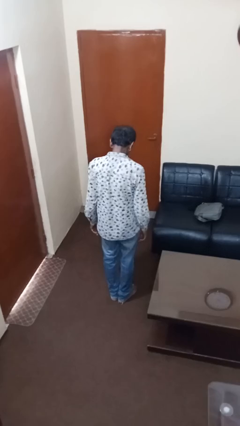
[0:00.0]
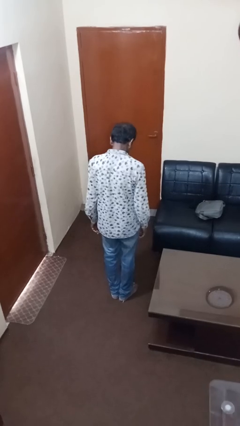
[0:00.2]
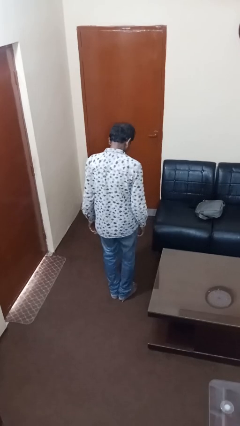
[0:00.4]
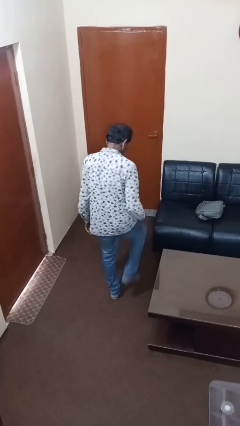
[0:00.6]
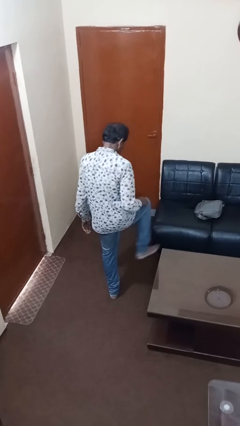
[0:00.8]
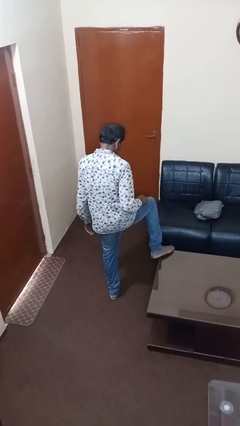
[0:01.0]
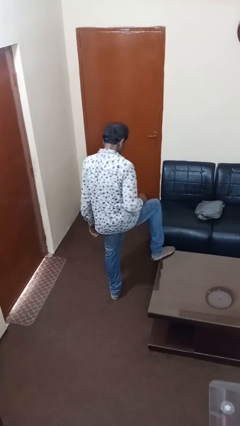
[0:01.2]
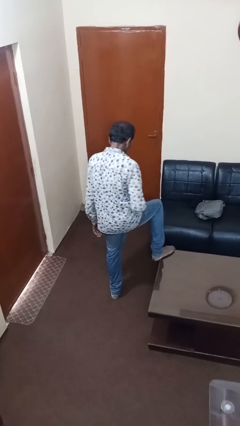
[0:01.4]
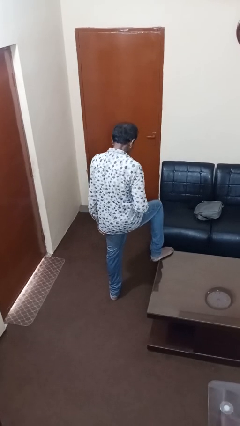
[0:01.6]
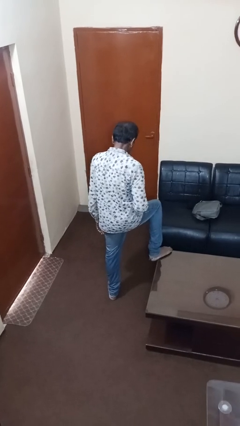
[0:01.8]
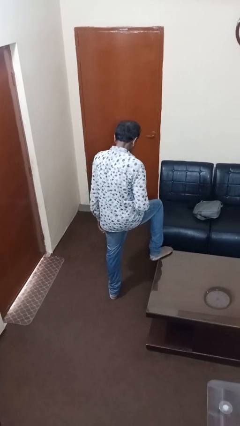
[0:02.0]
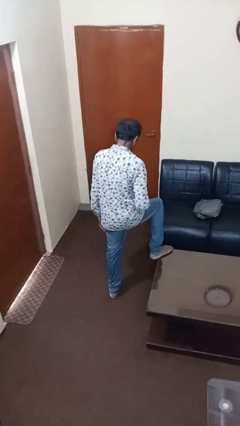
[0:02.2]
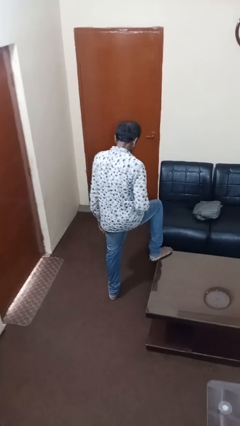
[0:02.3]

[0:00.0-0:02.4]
person puts feet up

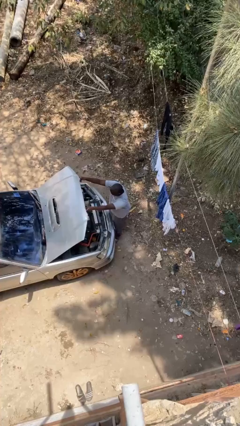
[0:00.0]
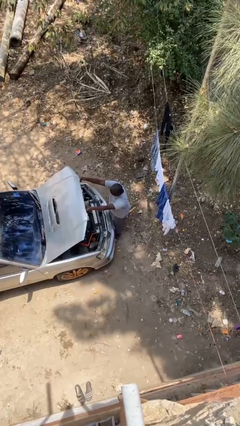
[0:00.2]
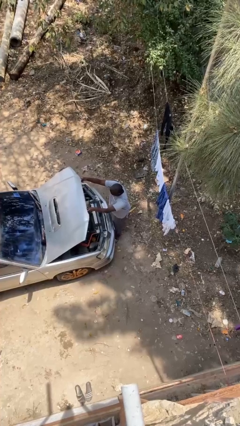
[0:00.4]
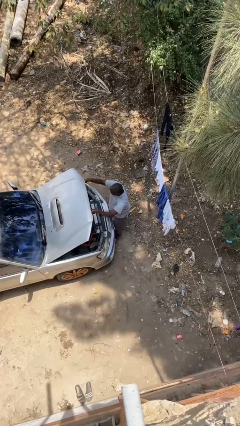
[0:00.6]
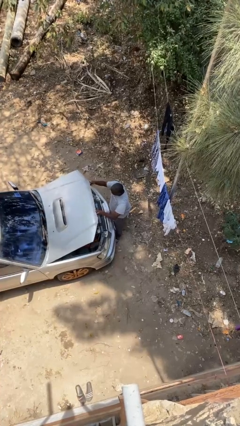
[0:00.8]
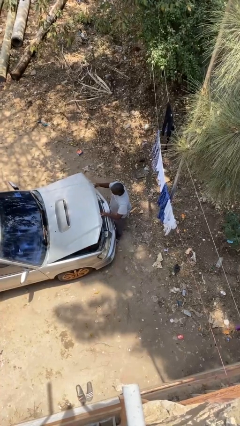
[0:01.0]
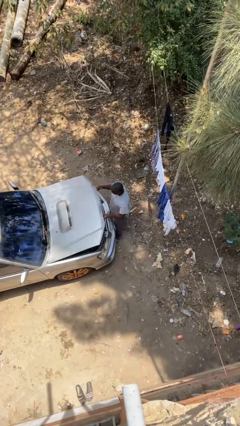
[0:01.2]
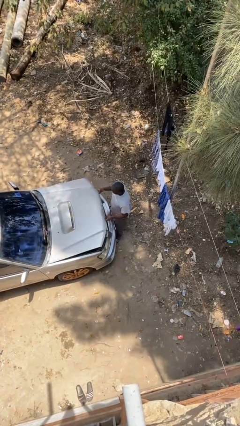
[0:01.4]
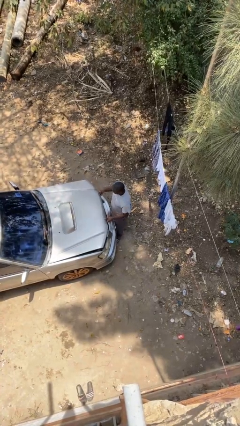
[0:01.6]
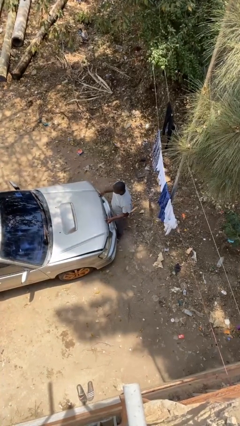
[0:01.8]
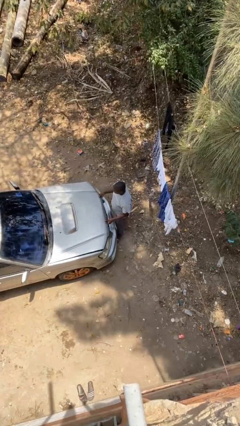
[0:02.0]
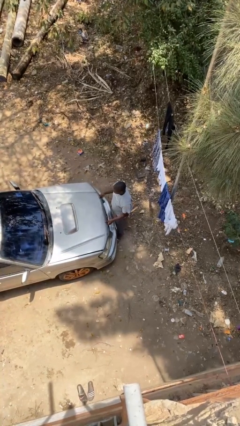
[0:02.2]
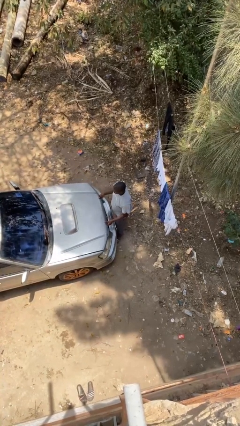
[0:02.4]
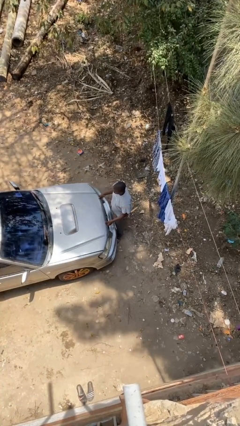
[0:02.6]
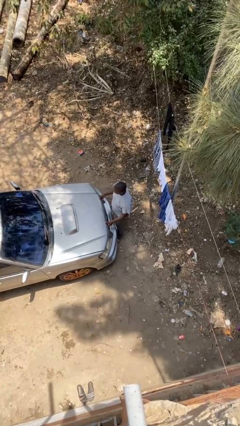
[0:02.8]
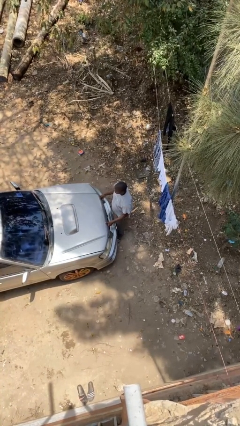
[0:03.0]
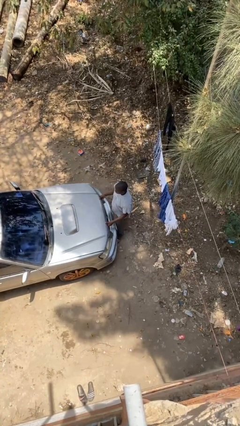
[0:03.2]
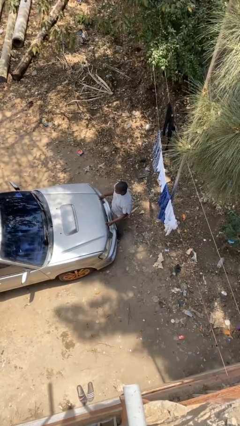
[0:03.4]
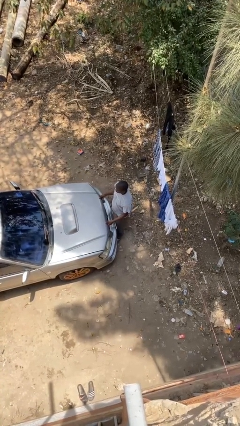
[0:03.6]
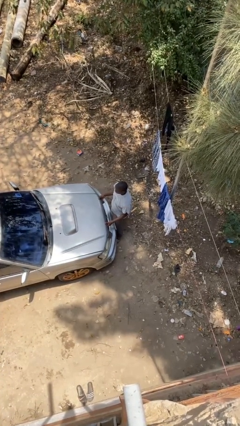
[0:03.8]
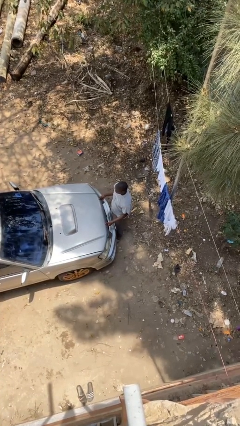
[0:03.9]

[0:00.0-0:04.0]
person closes car hood

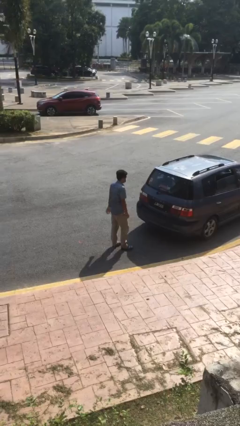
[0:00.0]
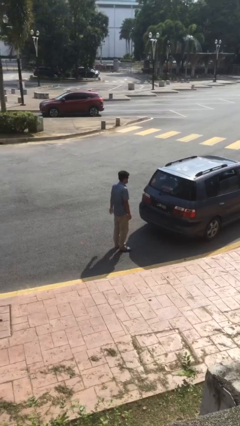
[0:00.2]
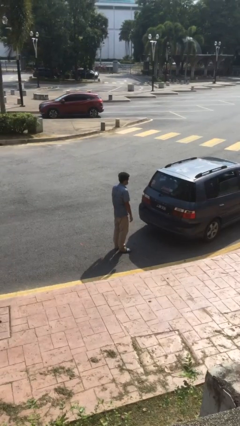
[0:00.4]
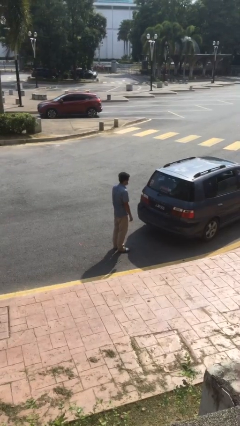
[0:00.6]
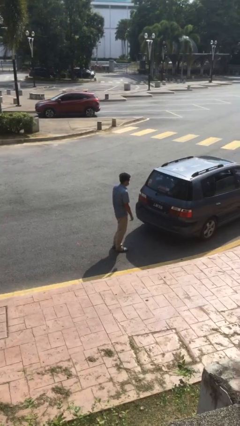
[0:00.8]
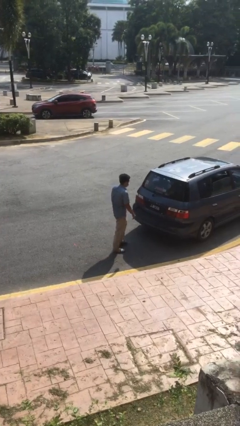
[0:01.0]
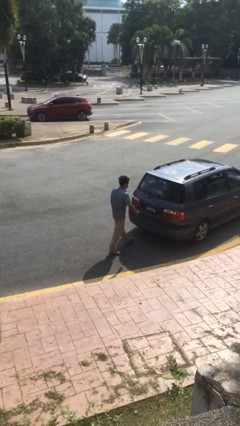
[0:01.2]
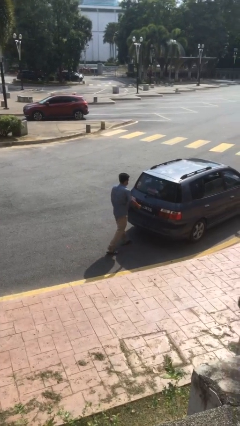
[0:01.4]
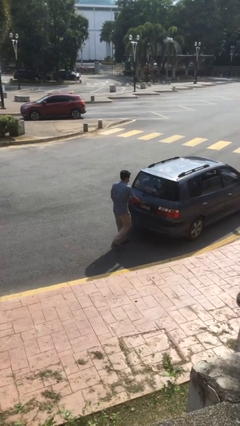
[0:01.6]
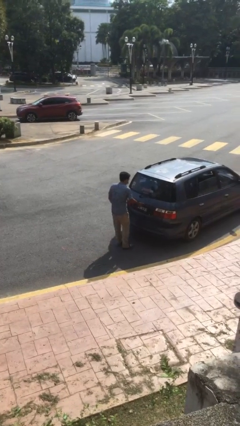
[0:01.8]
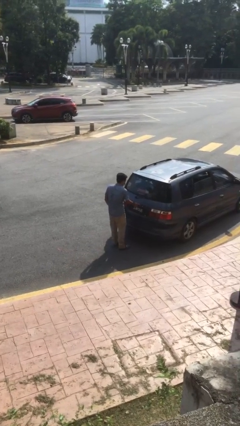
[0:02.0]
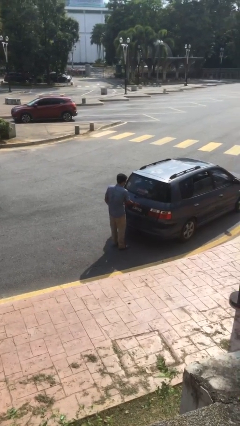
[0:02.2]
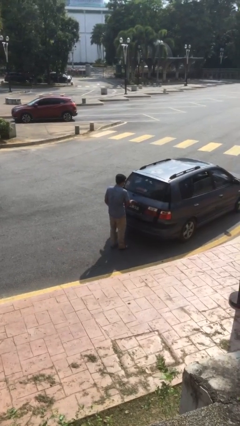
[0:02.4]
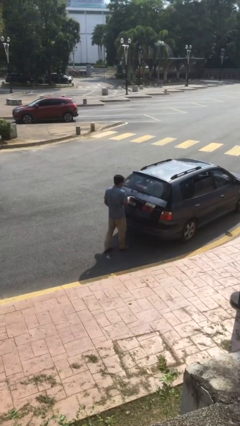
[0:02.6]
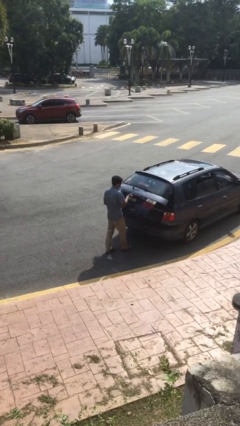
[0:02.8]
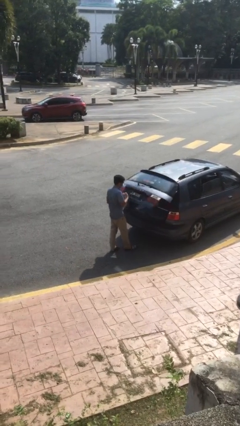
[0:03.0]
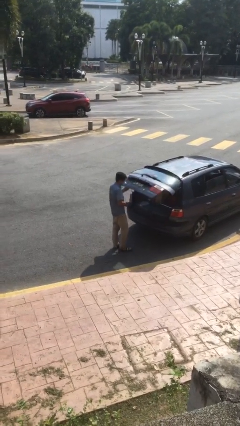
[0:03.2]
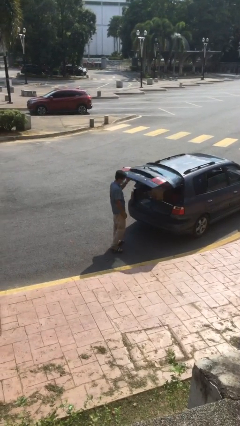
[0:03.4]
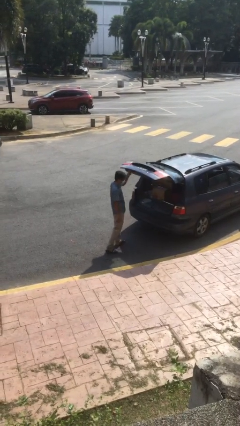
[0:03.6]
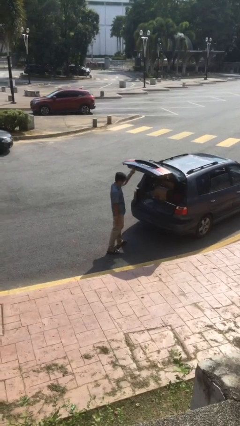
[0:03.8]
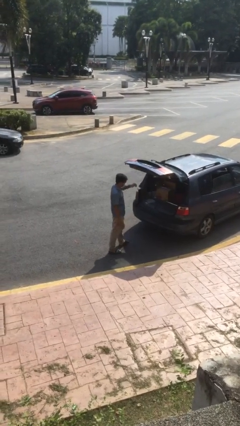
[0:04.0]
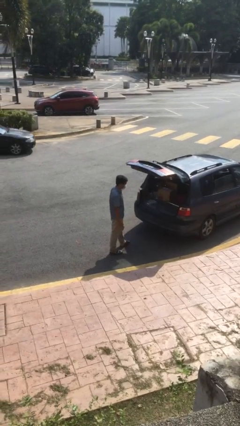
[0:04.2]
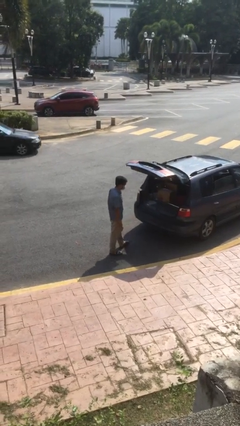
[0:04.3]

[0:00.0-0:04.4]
person opens car trunk

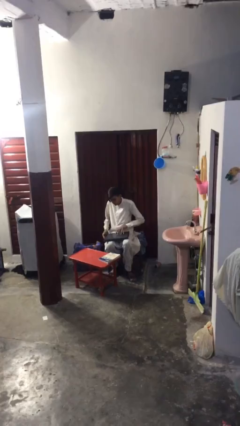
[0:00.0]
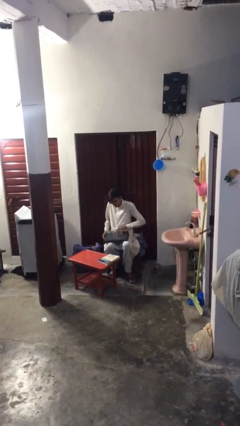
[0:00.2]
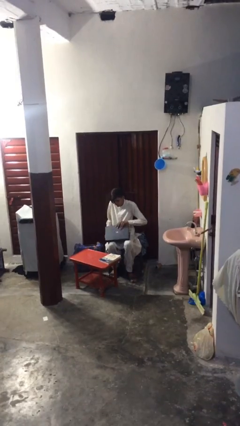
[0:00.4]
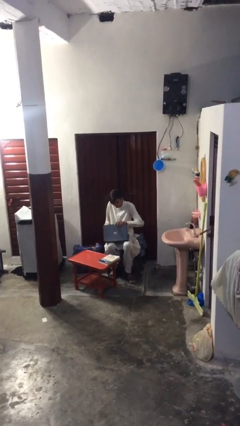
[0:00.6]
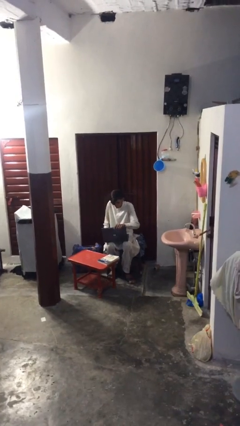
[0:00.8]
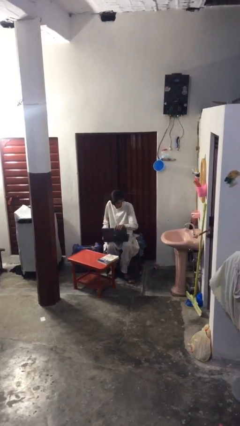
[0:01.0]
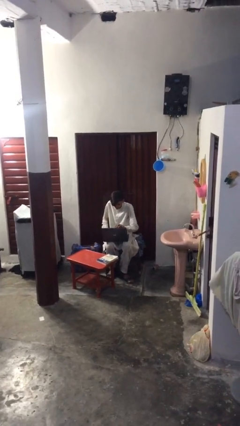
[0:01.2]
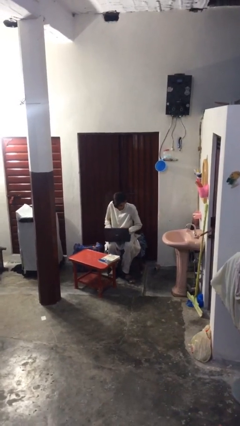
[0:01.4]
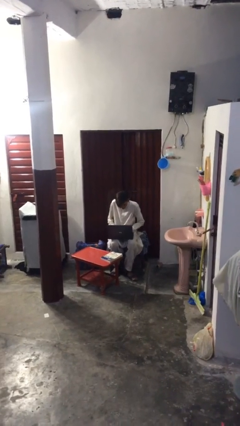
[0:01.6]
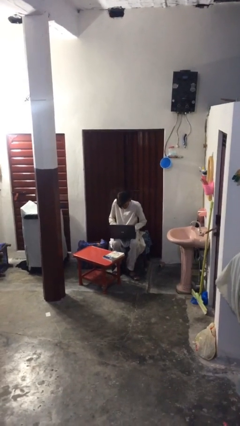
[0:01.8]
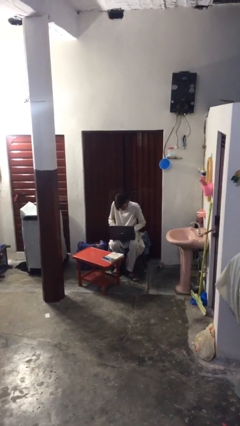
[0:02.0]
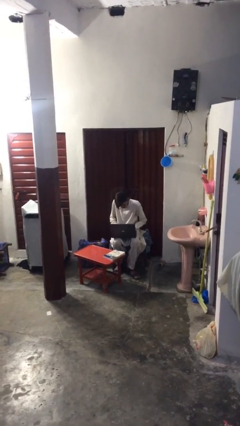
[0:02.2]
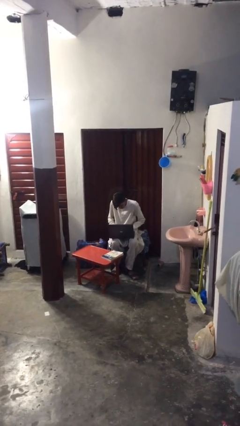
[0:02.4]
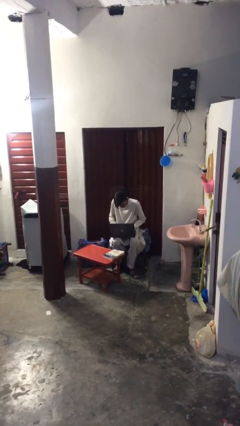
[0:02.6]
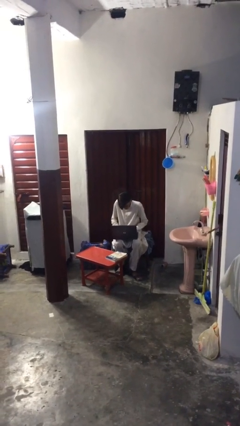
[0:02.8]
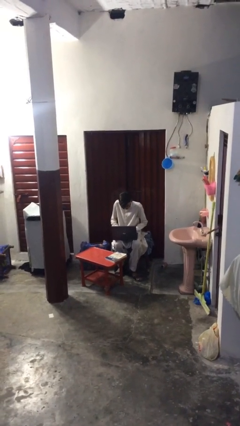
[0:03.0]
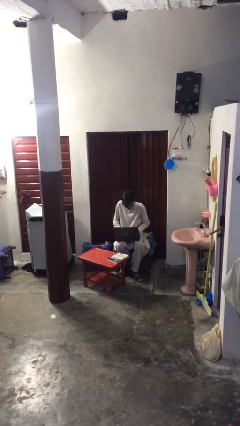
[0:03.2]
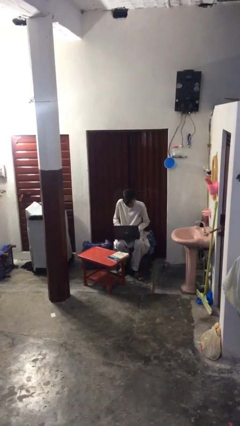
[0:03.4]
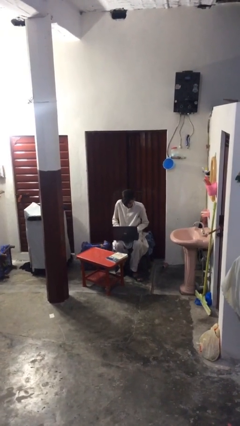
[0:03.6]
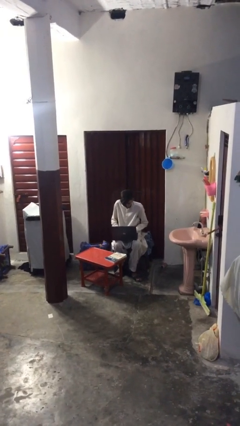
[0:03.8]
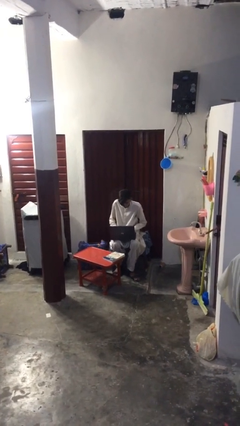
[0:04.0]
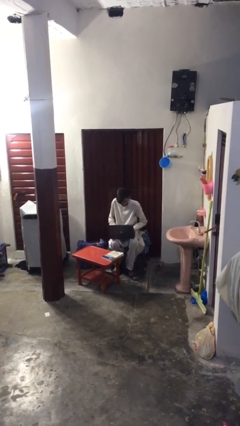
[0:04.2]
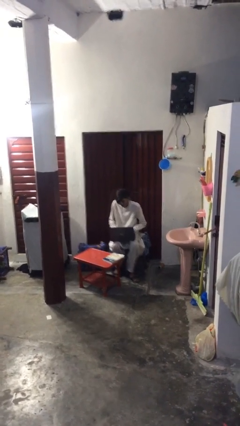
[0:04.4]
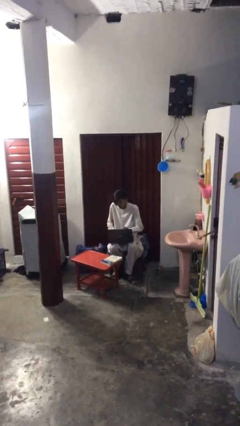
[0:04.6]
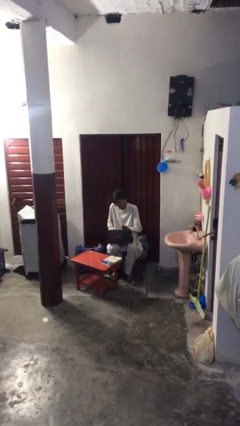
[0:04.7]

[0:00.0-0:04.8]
person interacts with laptop

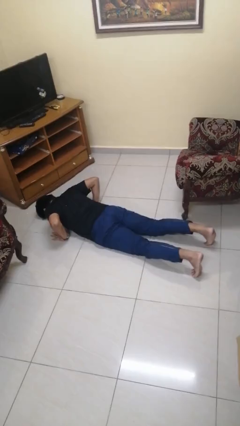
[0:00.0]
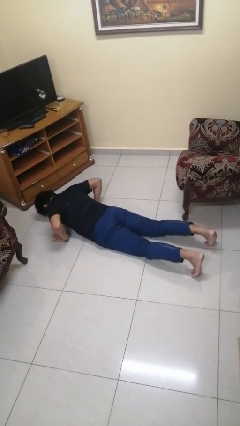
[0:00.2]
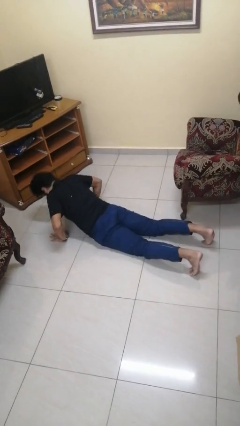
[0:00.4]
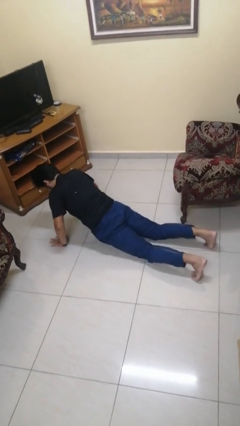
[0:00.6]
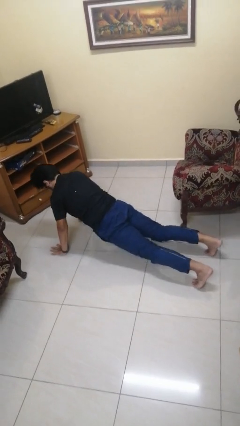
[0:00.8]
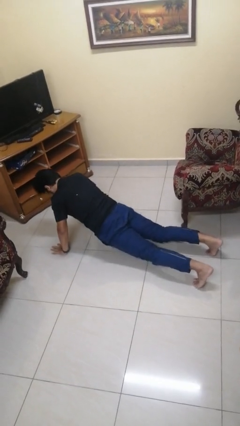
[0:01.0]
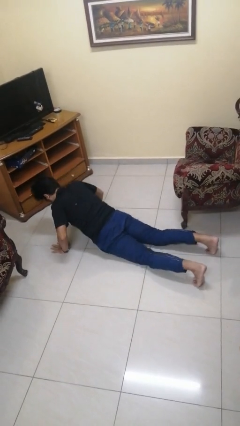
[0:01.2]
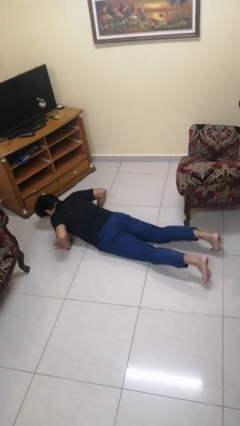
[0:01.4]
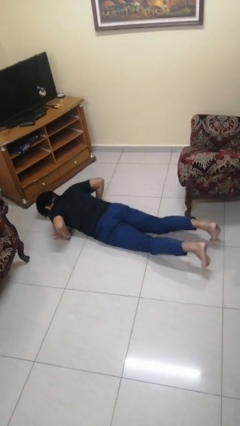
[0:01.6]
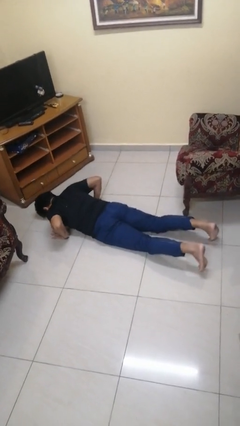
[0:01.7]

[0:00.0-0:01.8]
person exercises with pushup

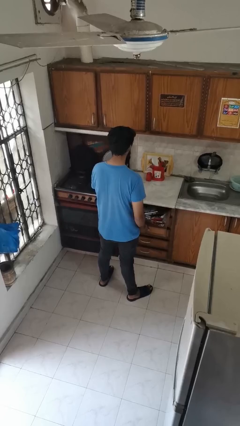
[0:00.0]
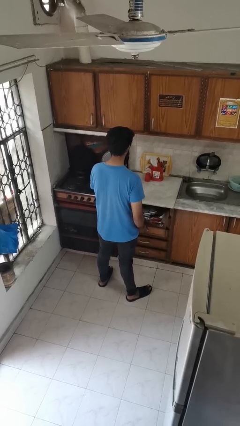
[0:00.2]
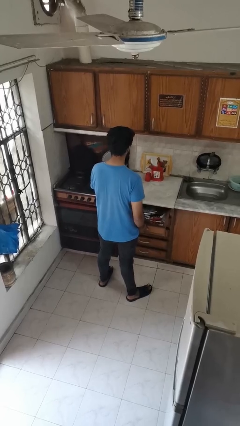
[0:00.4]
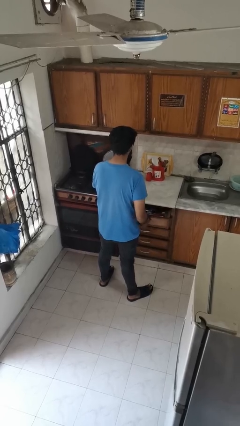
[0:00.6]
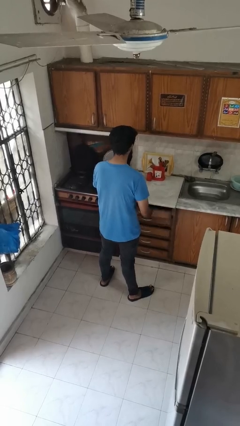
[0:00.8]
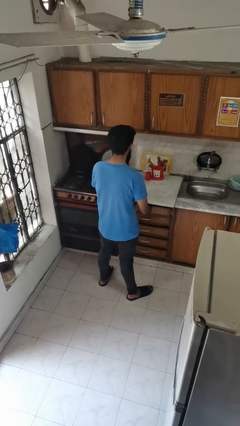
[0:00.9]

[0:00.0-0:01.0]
person closes kitchen drawer
